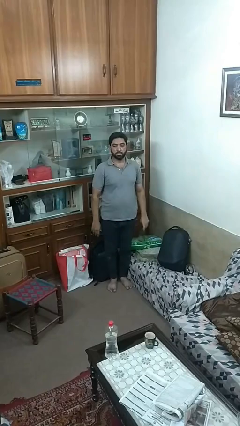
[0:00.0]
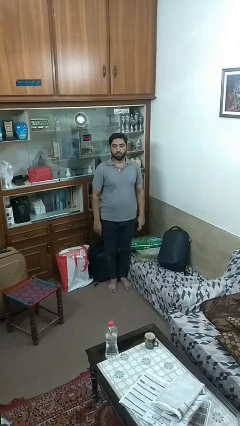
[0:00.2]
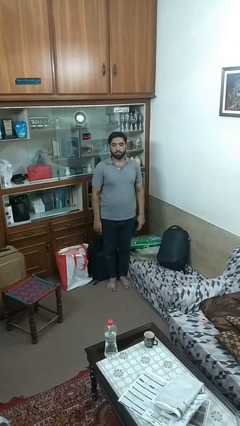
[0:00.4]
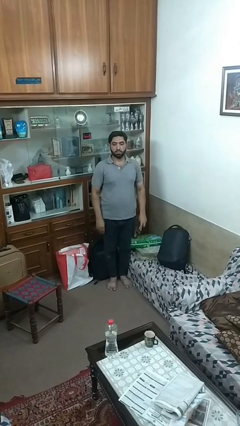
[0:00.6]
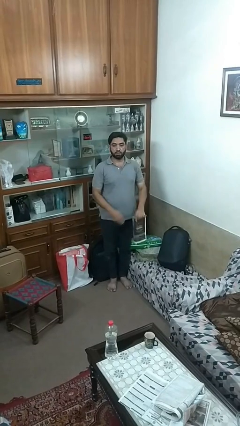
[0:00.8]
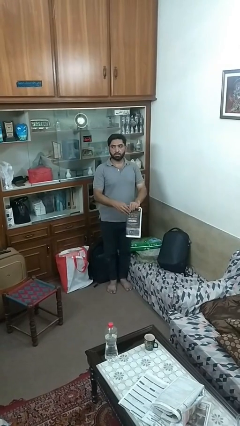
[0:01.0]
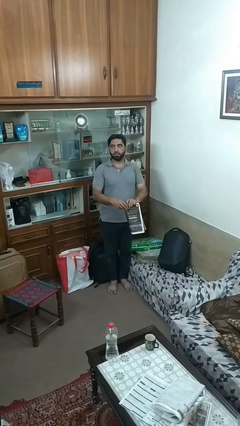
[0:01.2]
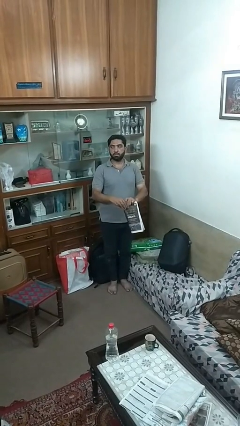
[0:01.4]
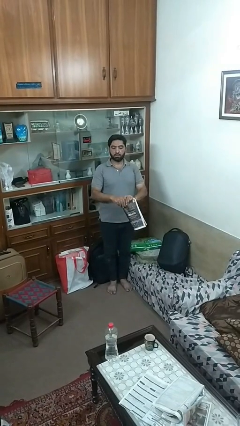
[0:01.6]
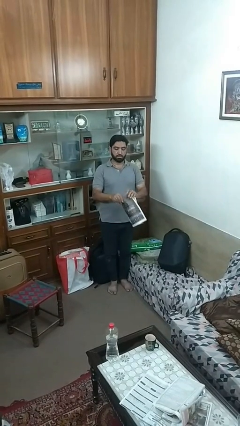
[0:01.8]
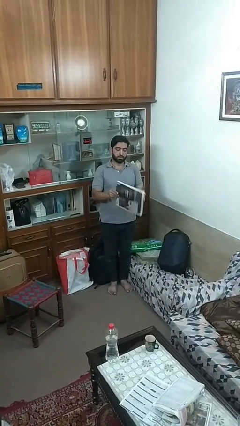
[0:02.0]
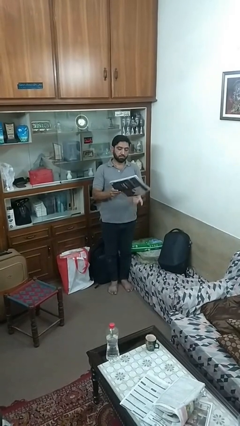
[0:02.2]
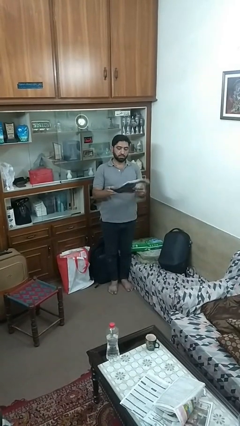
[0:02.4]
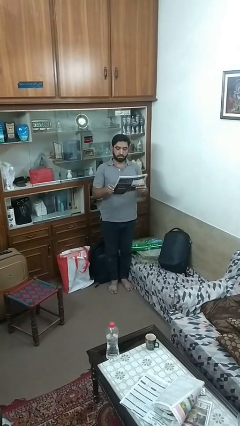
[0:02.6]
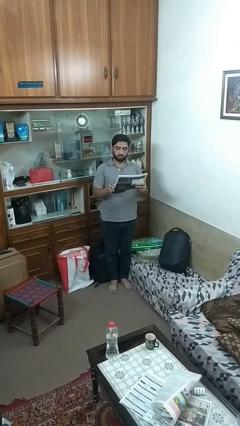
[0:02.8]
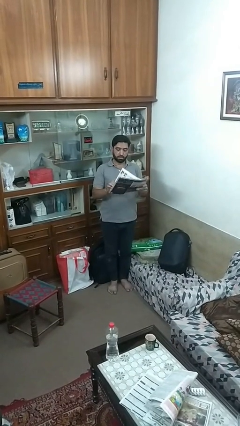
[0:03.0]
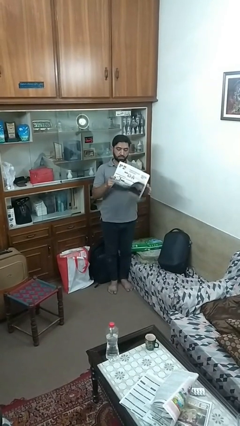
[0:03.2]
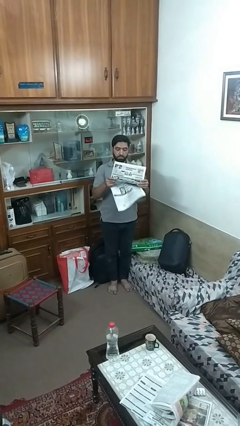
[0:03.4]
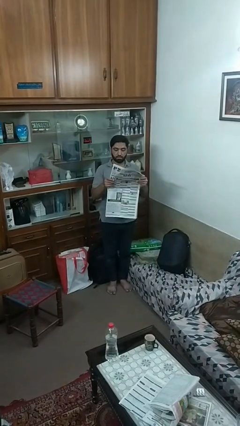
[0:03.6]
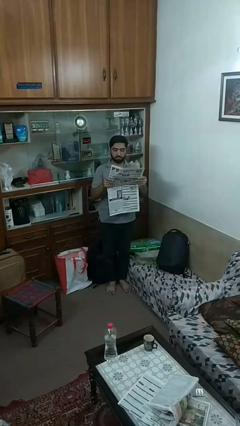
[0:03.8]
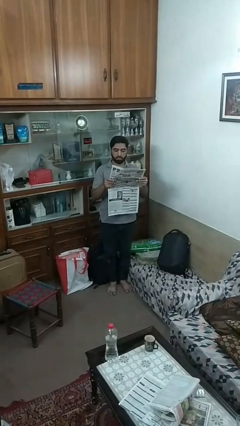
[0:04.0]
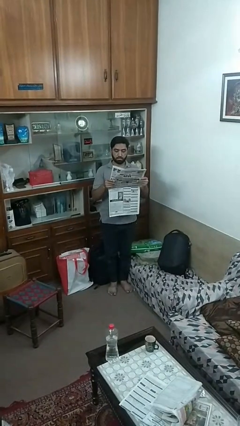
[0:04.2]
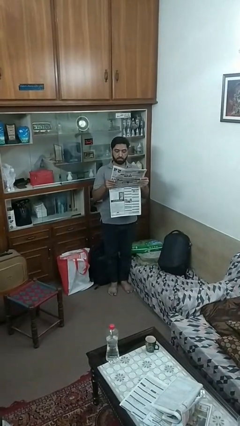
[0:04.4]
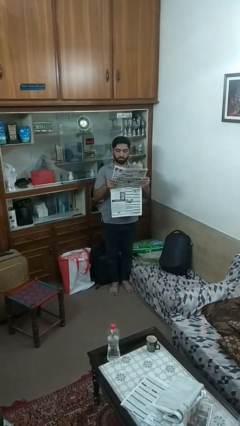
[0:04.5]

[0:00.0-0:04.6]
person reads newspaper

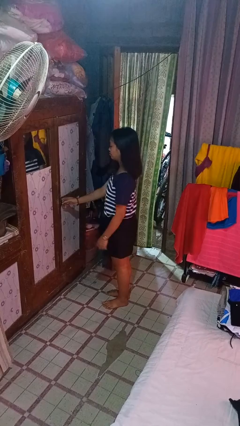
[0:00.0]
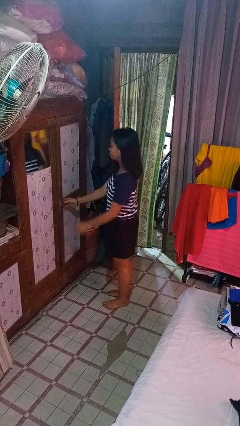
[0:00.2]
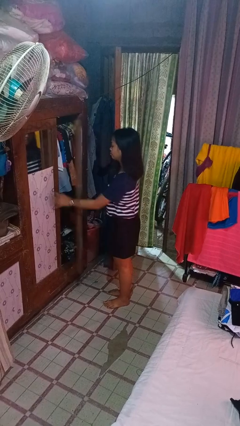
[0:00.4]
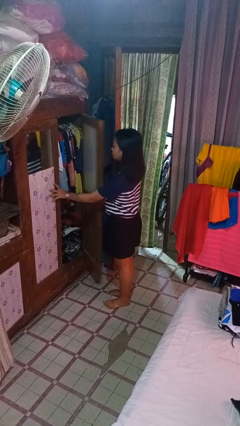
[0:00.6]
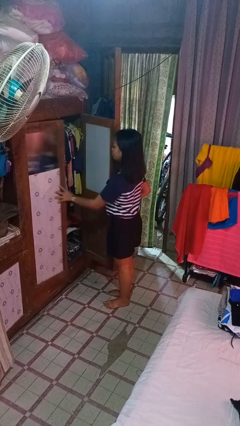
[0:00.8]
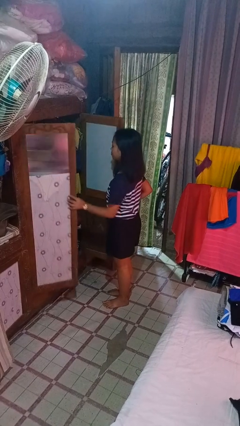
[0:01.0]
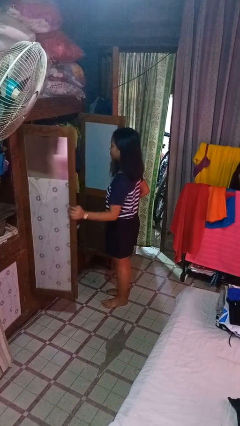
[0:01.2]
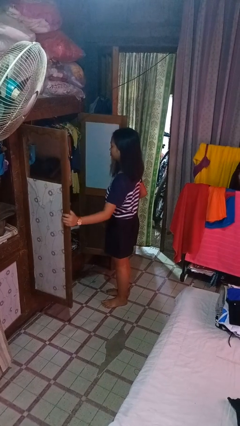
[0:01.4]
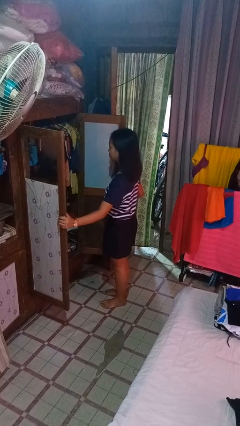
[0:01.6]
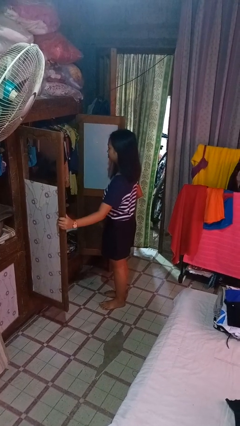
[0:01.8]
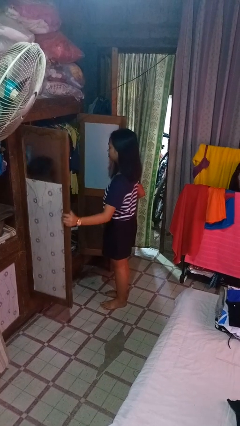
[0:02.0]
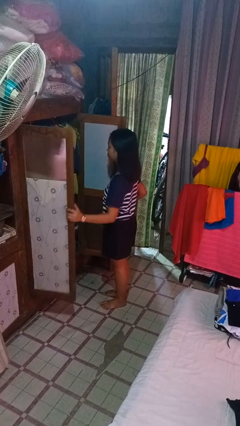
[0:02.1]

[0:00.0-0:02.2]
person opens closet door

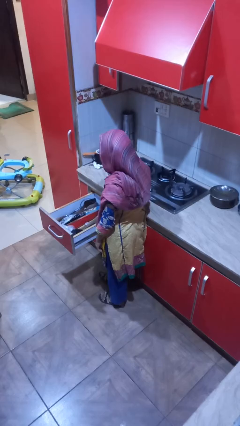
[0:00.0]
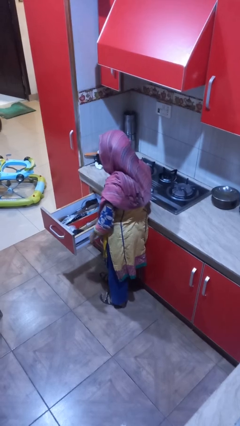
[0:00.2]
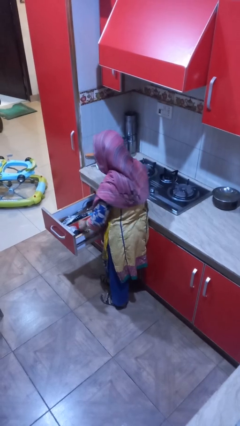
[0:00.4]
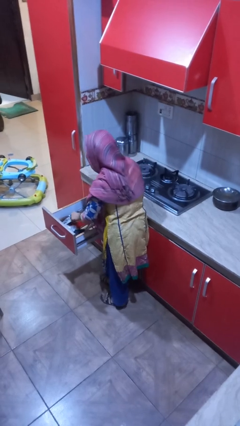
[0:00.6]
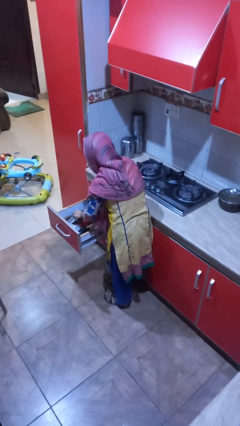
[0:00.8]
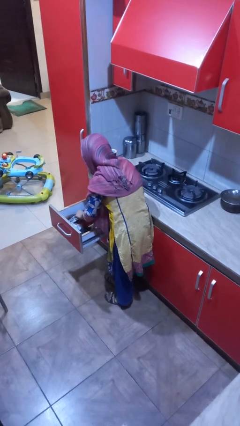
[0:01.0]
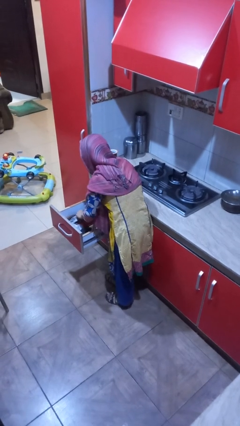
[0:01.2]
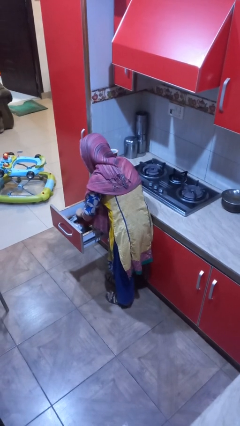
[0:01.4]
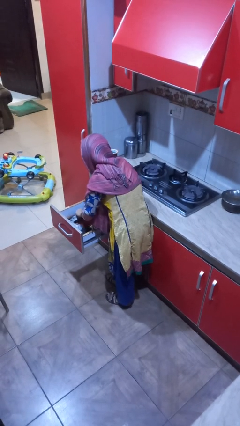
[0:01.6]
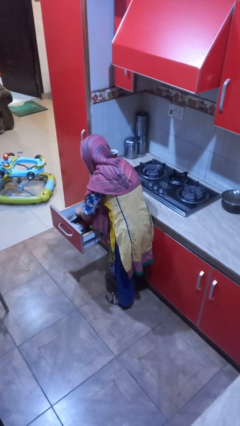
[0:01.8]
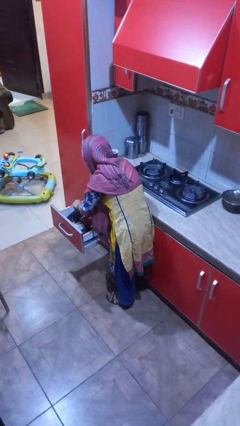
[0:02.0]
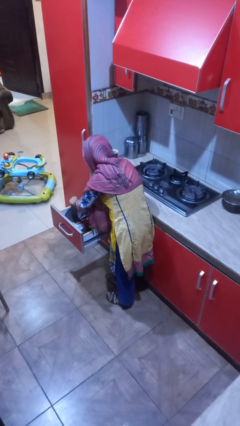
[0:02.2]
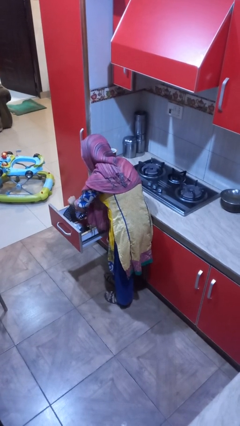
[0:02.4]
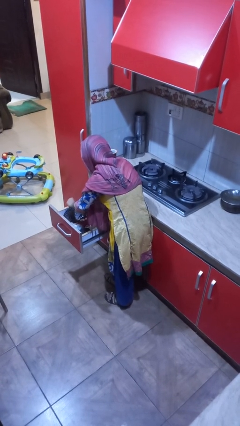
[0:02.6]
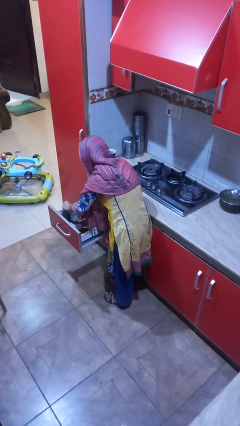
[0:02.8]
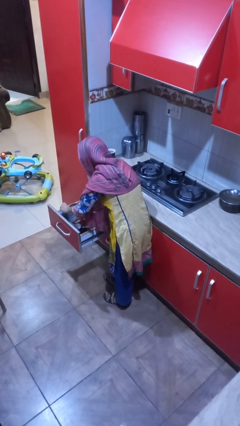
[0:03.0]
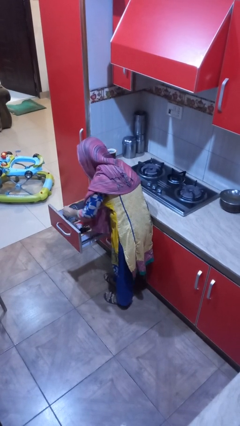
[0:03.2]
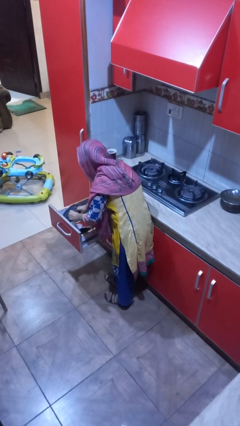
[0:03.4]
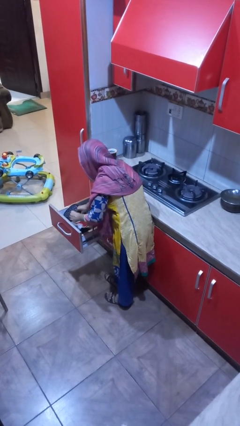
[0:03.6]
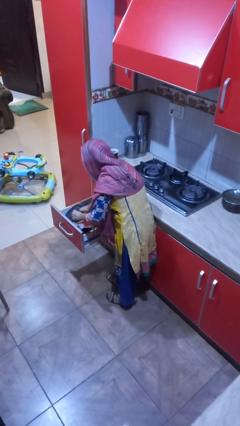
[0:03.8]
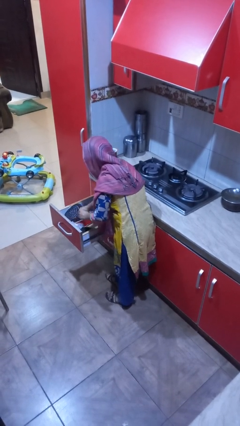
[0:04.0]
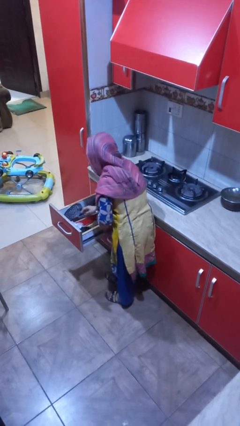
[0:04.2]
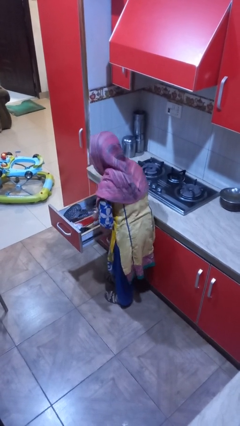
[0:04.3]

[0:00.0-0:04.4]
person searches in kitchen drawer

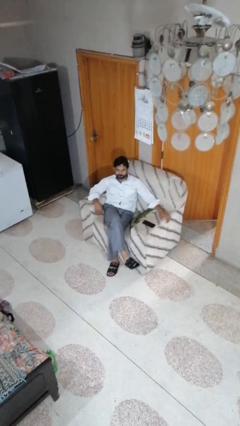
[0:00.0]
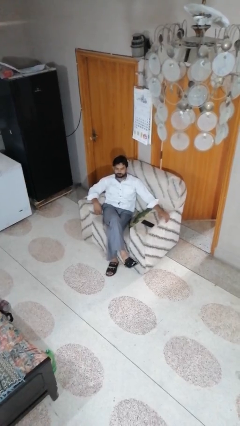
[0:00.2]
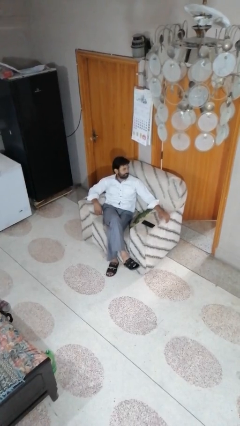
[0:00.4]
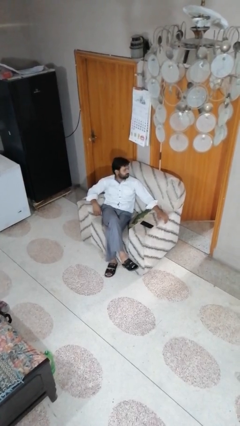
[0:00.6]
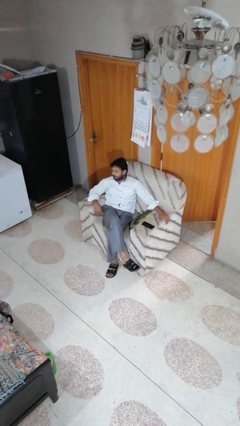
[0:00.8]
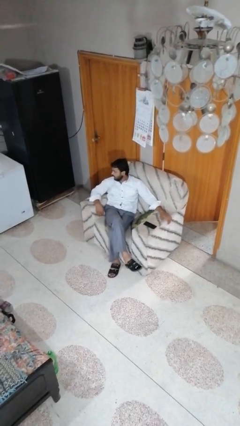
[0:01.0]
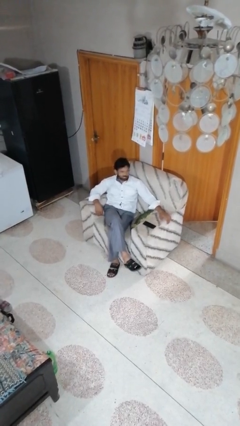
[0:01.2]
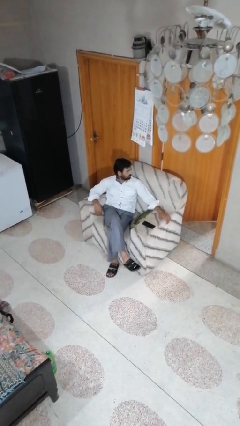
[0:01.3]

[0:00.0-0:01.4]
person shakes head

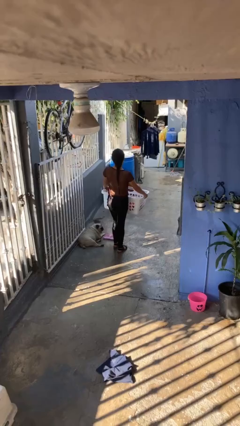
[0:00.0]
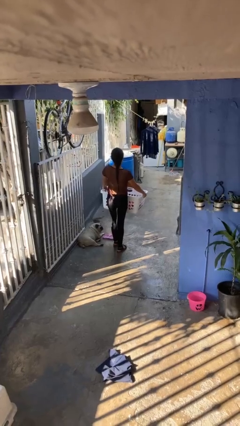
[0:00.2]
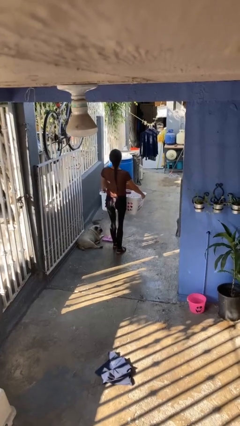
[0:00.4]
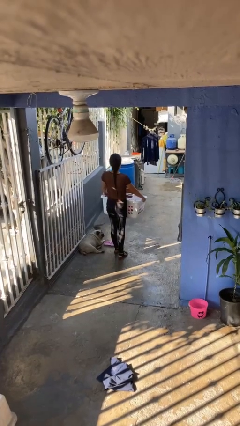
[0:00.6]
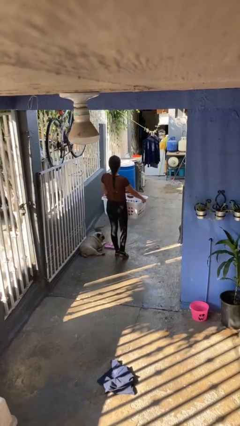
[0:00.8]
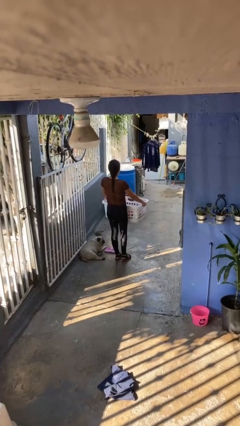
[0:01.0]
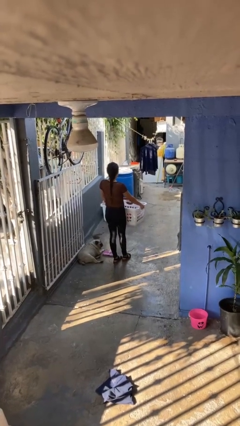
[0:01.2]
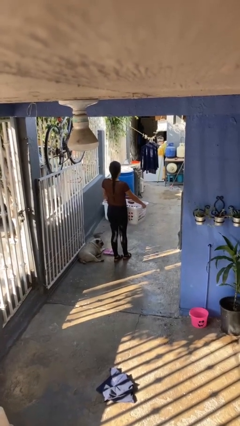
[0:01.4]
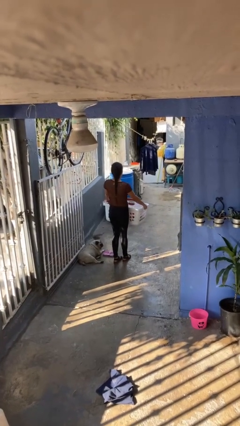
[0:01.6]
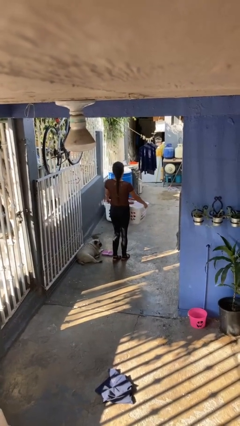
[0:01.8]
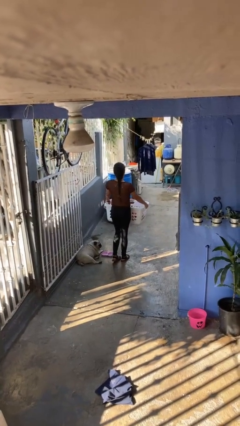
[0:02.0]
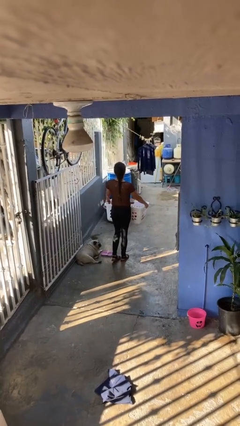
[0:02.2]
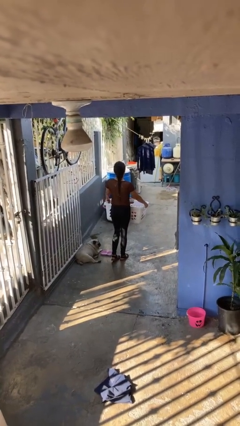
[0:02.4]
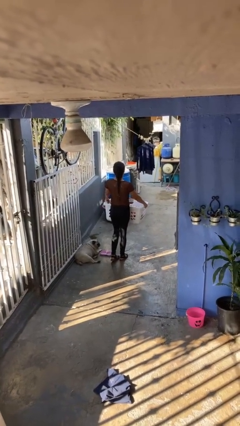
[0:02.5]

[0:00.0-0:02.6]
person carries laundry basket

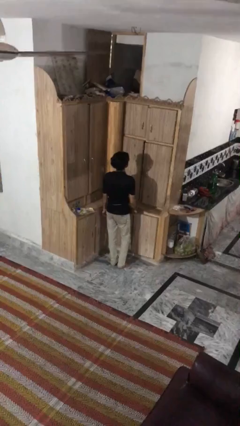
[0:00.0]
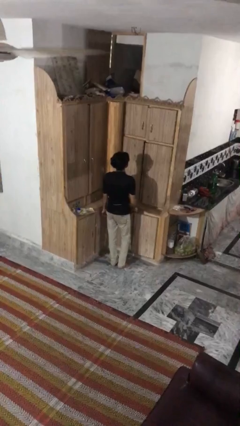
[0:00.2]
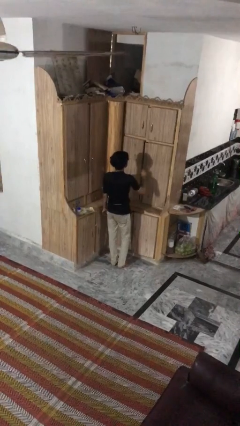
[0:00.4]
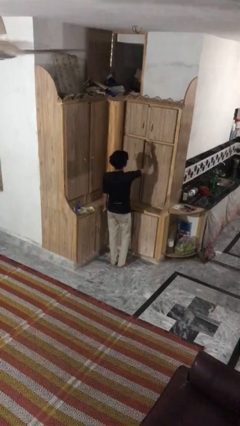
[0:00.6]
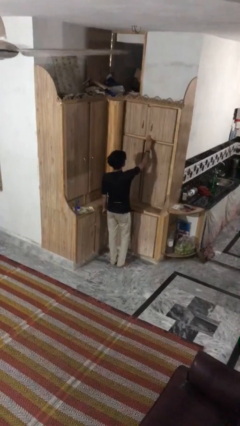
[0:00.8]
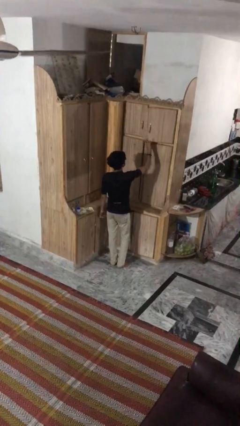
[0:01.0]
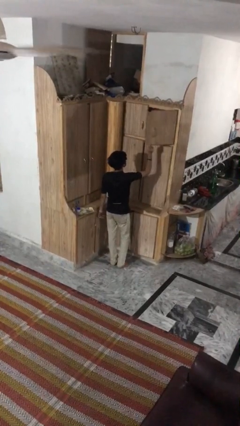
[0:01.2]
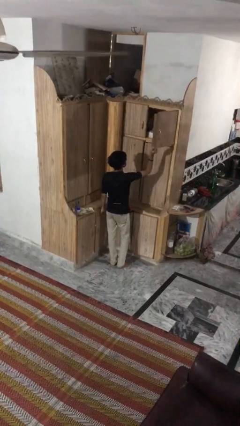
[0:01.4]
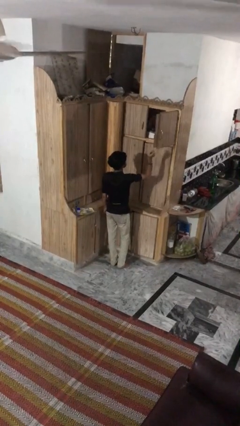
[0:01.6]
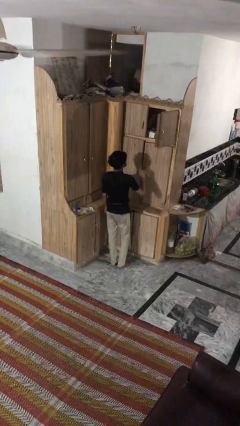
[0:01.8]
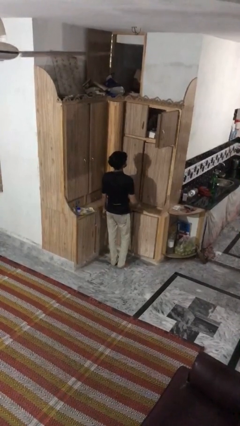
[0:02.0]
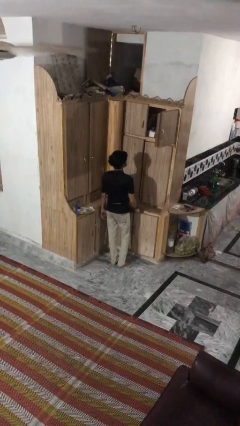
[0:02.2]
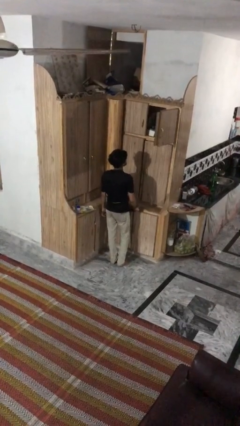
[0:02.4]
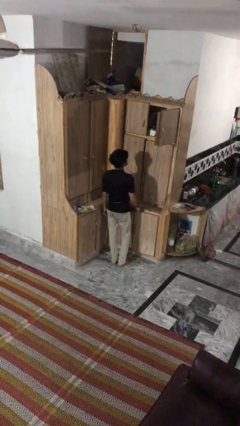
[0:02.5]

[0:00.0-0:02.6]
person opens cabinet
